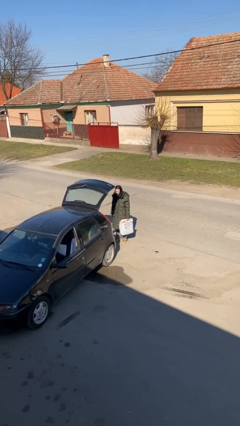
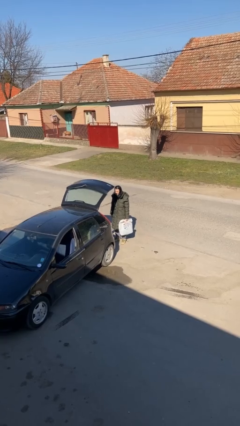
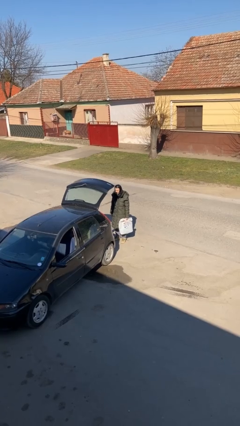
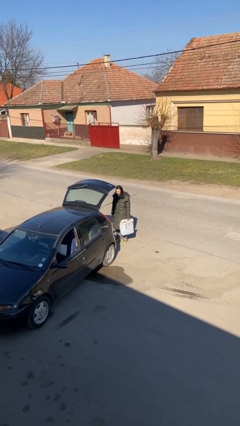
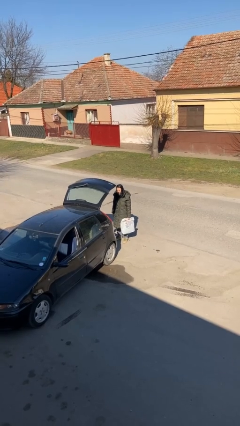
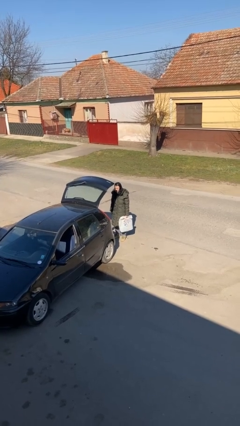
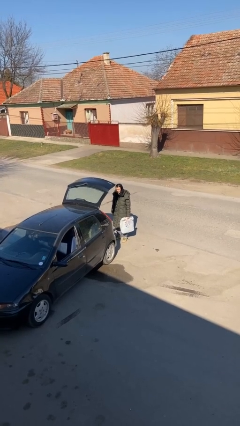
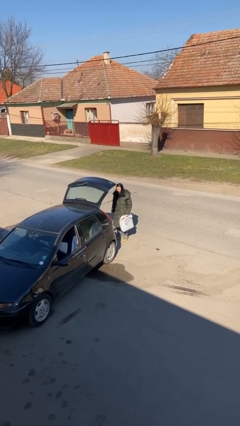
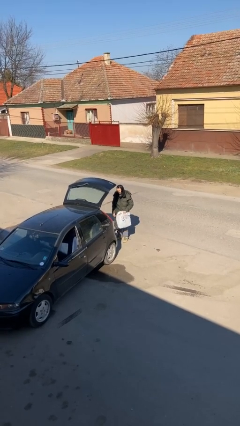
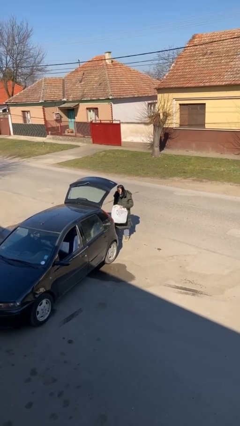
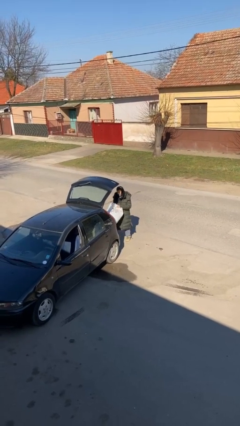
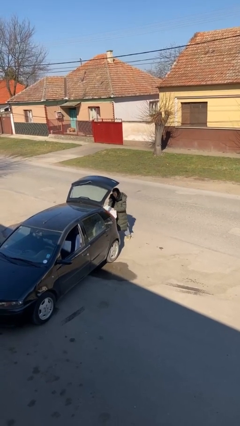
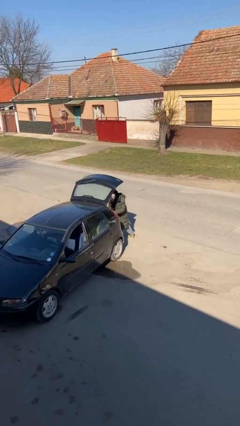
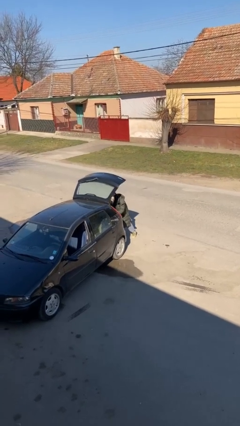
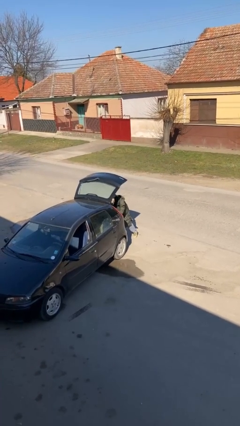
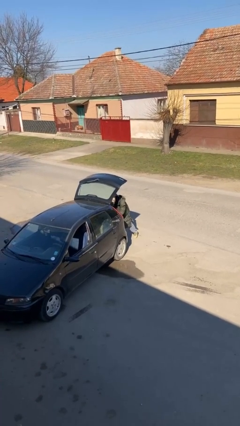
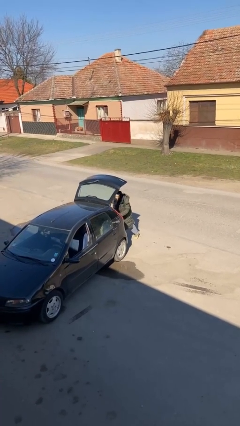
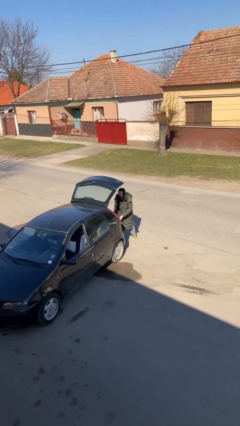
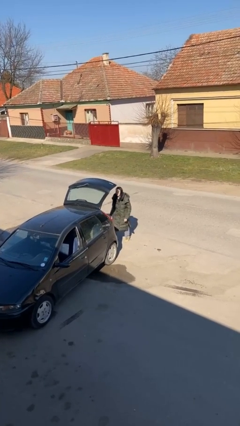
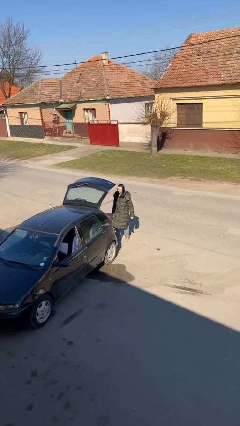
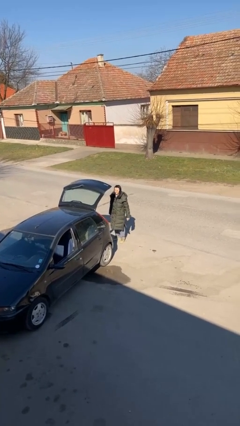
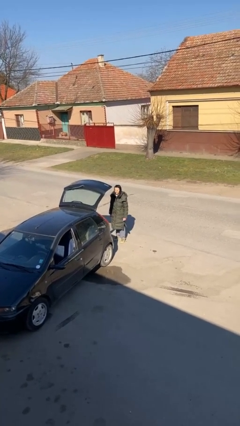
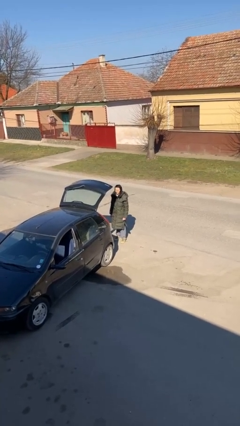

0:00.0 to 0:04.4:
person loads car

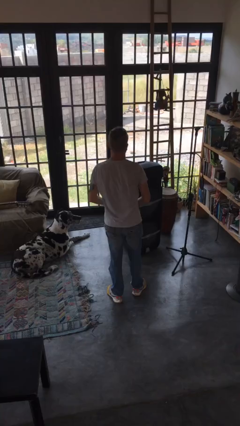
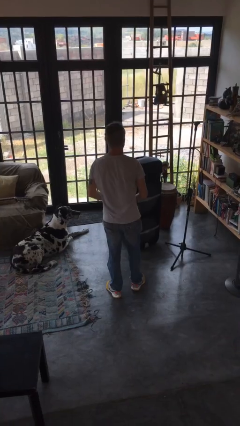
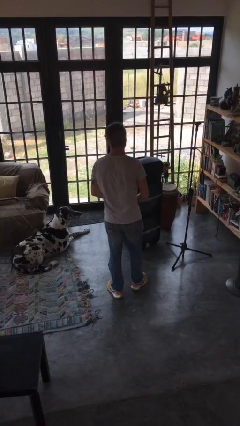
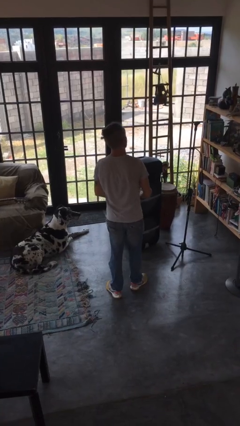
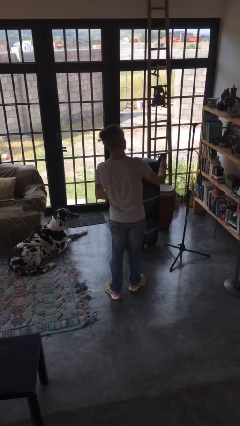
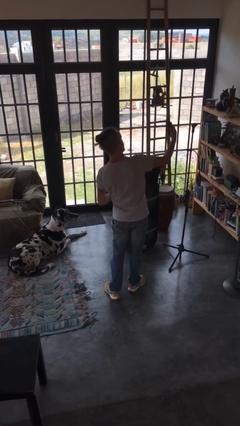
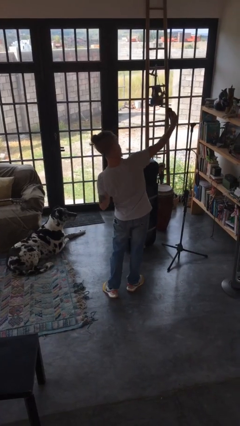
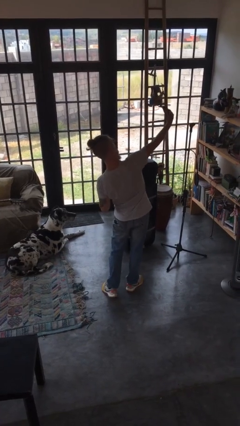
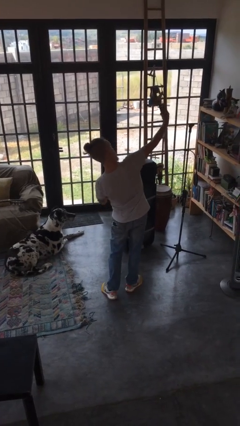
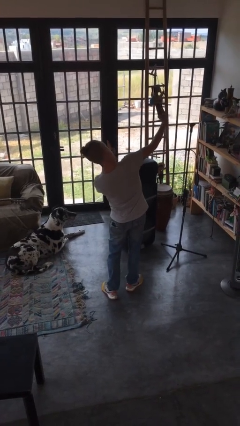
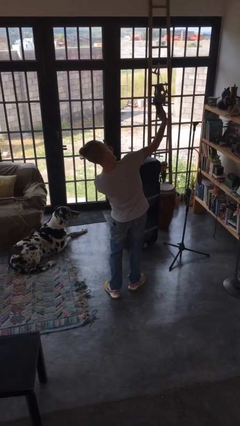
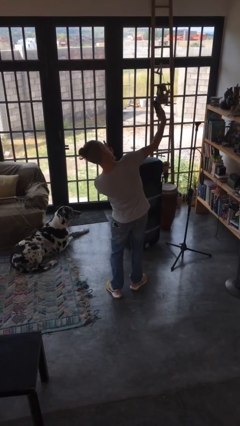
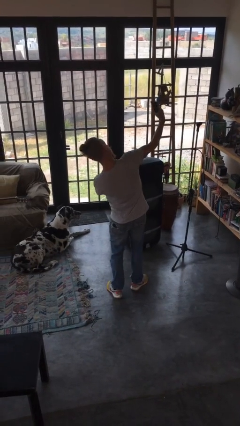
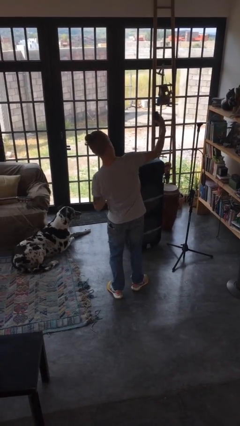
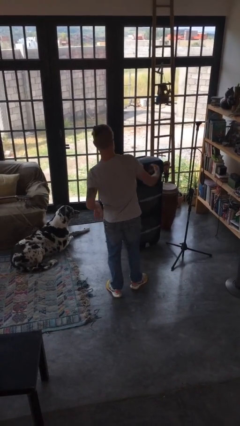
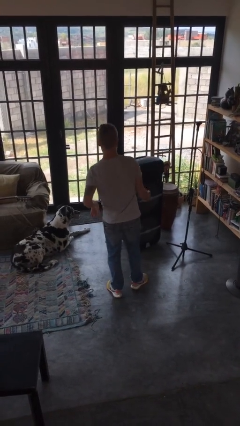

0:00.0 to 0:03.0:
person takes selfie

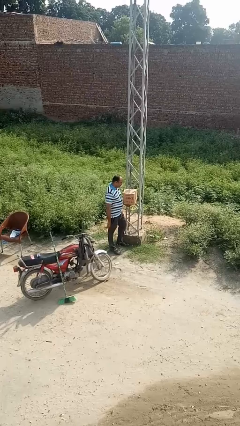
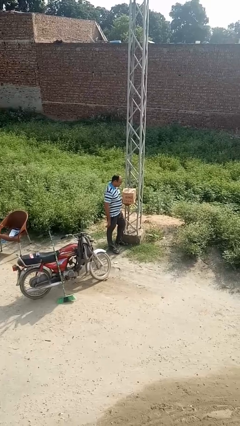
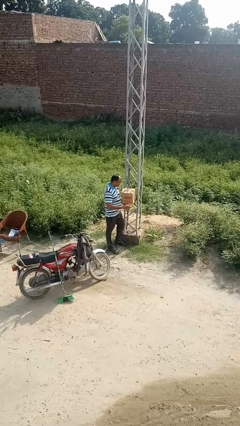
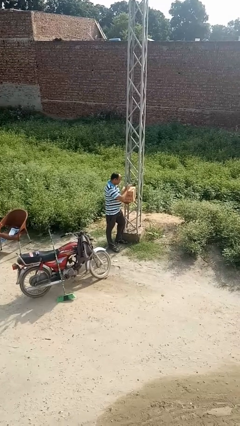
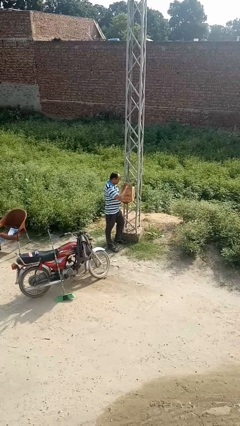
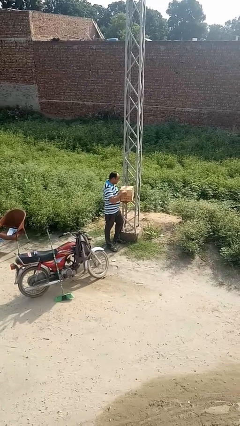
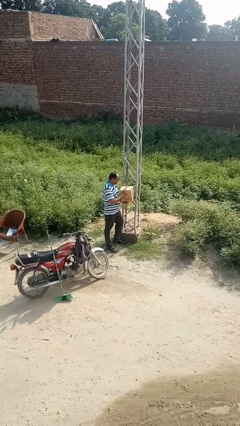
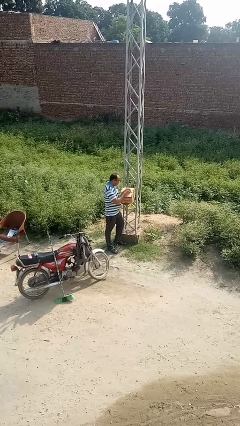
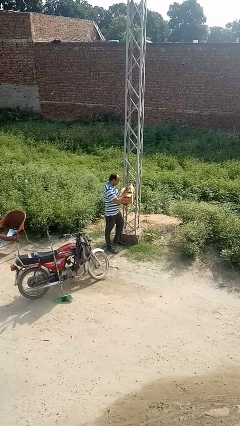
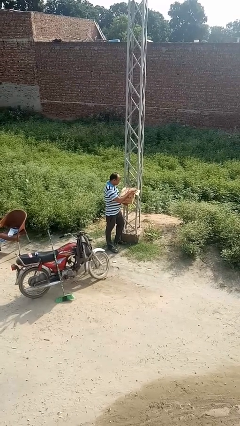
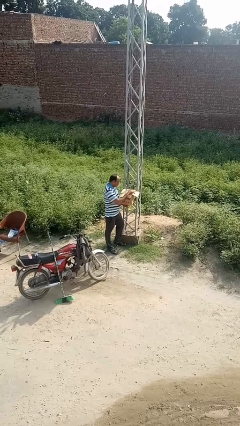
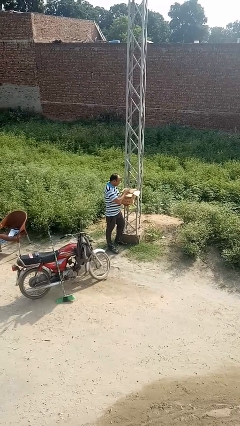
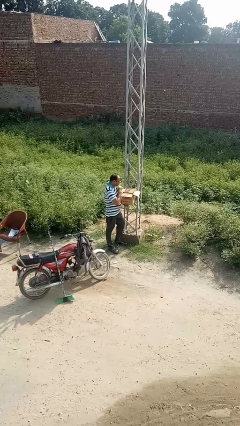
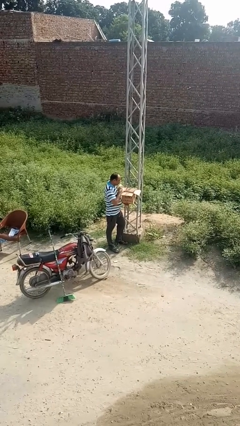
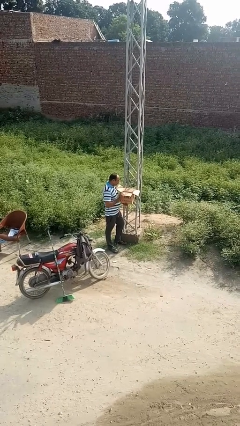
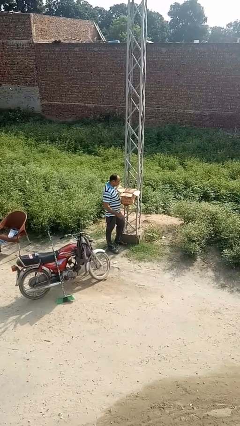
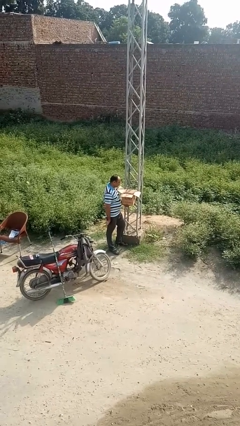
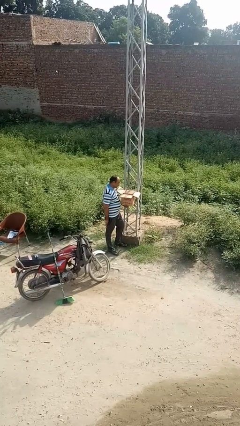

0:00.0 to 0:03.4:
person opens mailbox

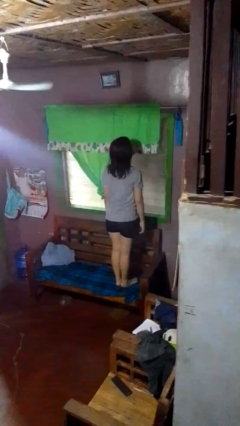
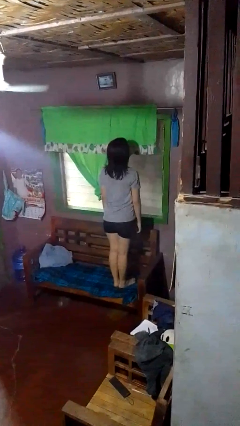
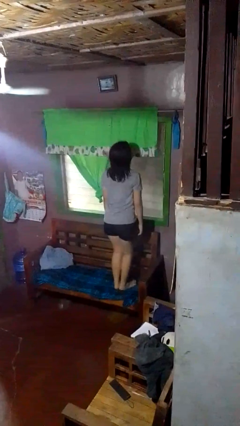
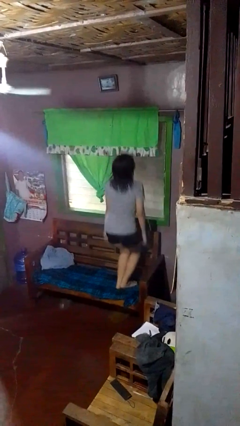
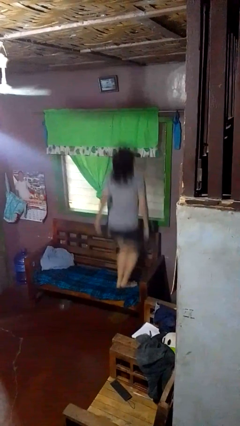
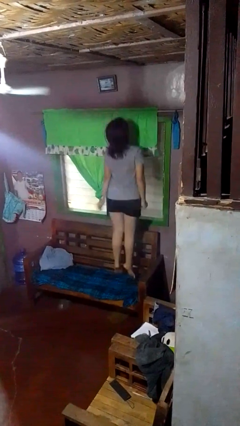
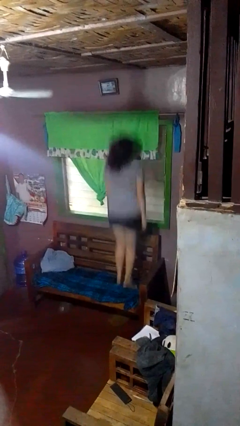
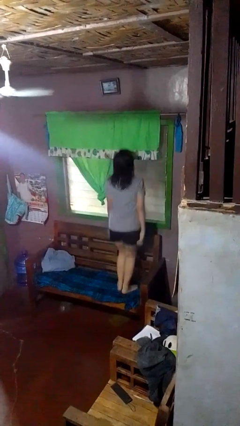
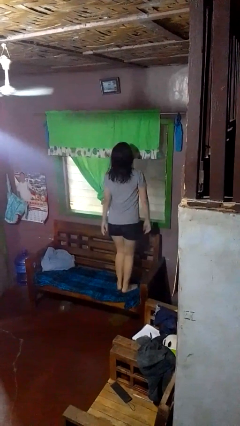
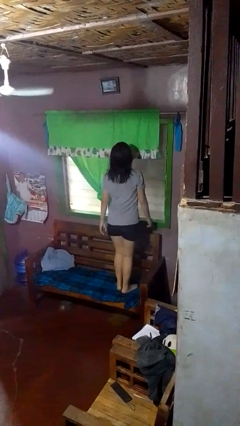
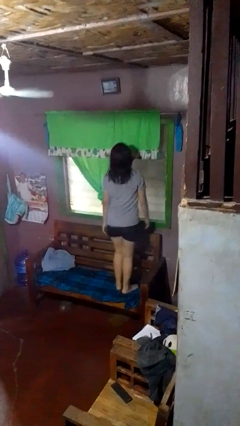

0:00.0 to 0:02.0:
person jumps on couch

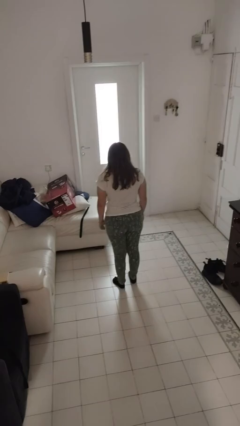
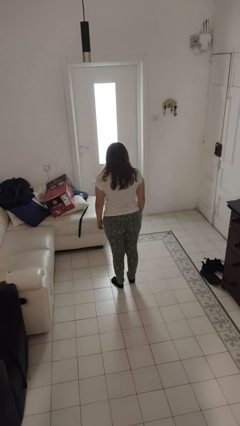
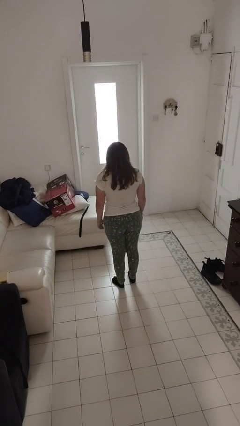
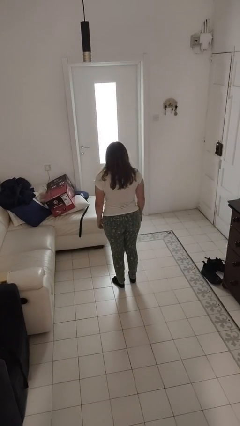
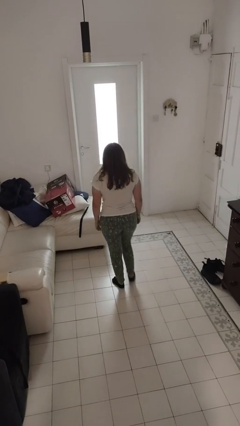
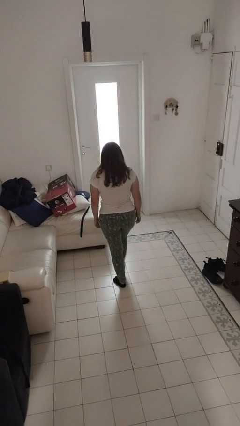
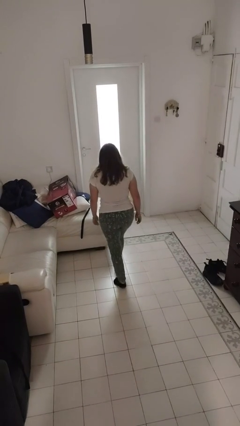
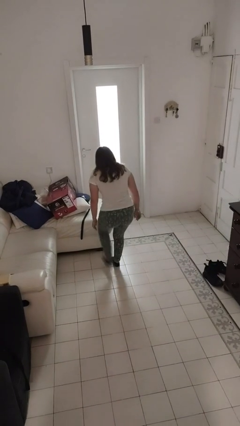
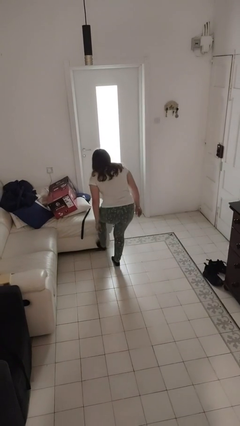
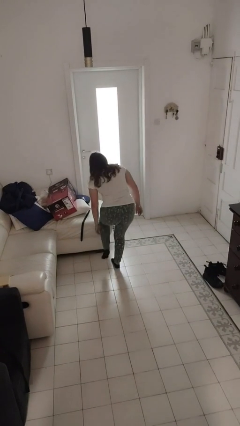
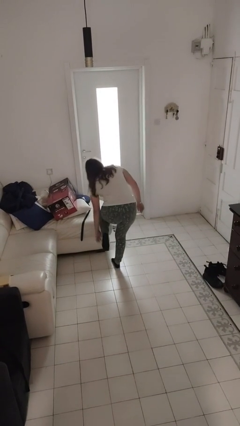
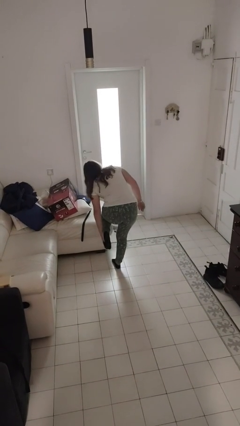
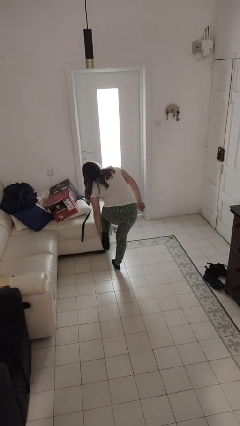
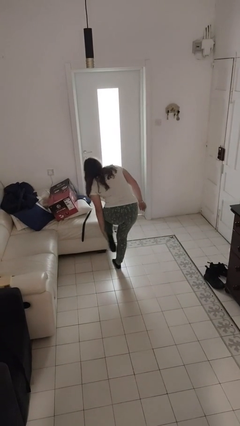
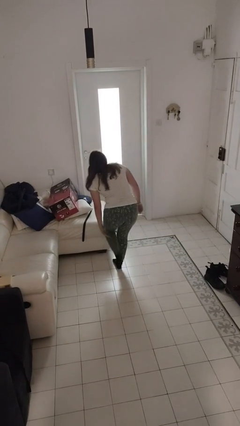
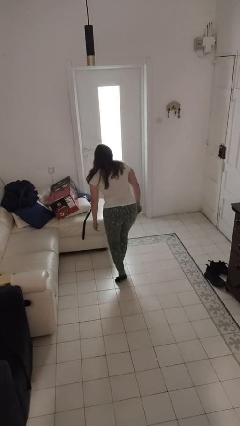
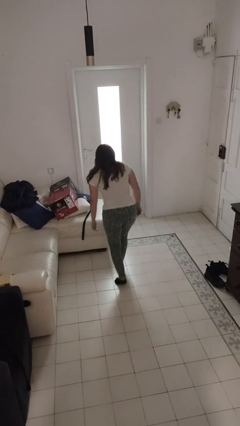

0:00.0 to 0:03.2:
person stubs toe

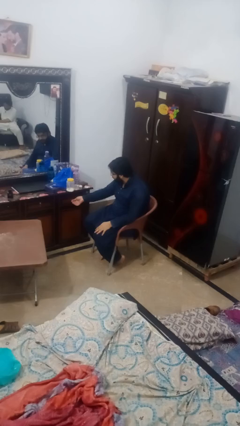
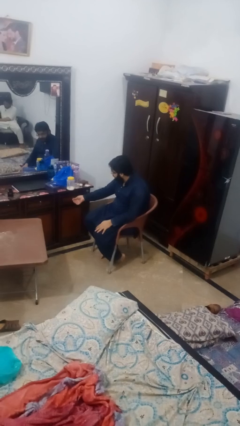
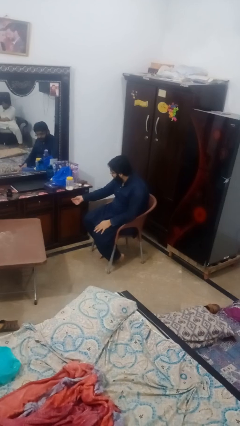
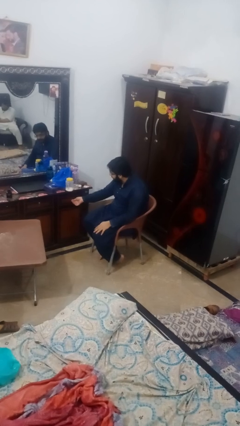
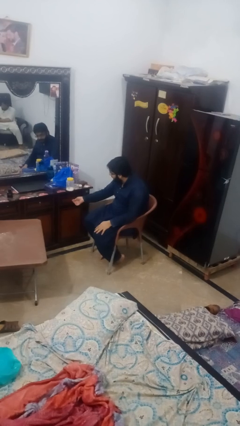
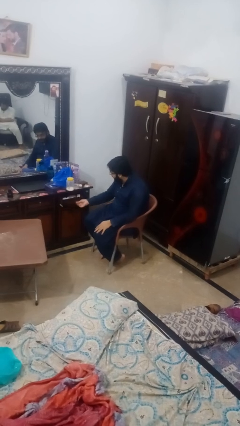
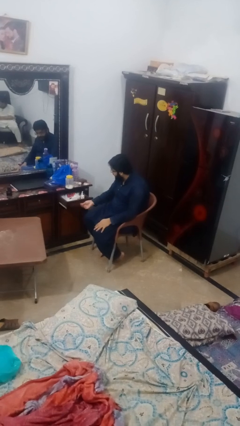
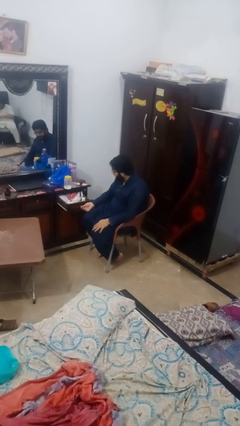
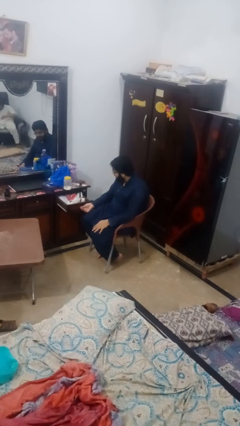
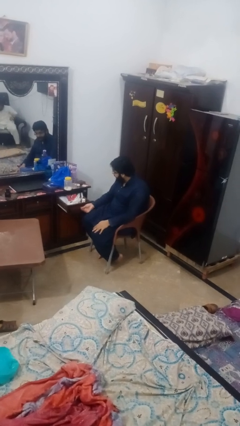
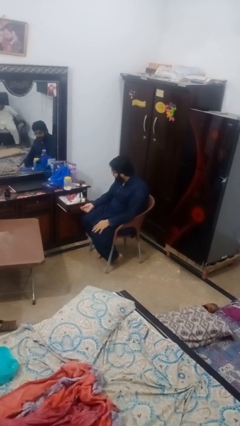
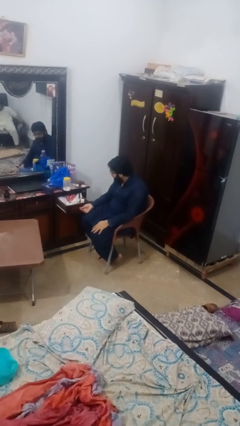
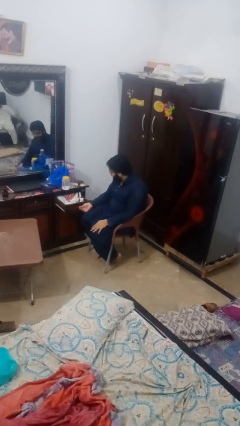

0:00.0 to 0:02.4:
person opens dresser drawer
